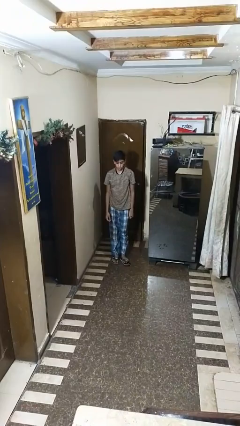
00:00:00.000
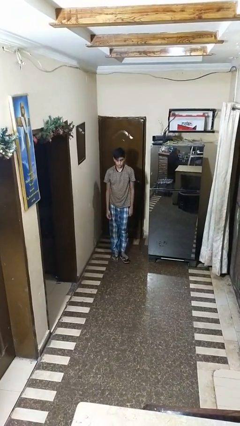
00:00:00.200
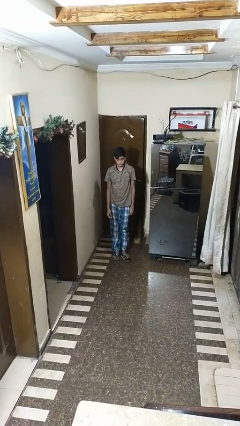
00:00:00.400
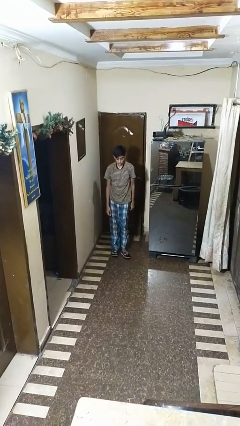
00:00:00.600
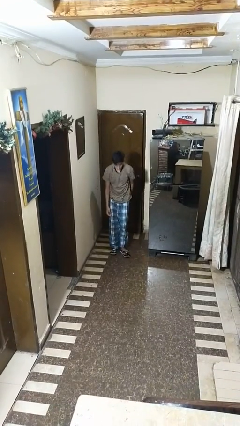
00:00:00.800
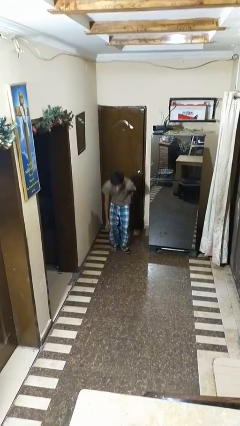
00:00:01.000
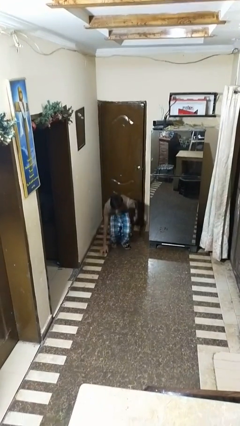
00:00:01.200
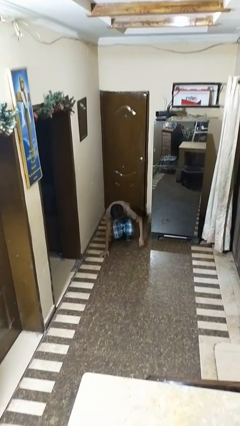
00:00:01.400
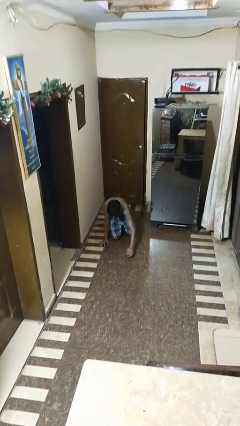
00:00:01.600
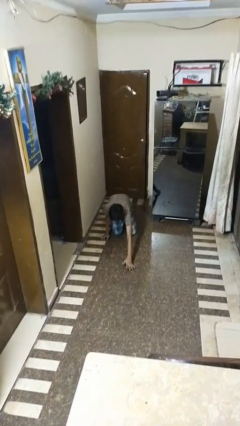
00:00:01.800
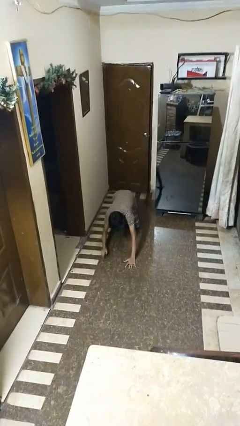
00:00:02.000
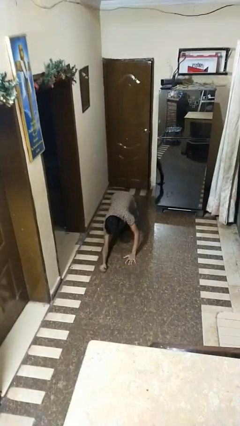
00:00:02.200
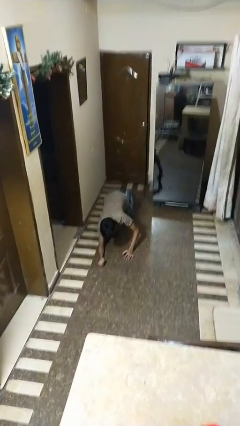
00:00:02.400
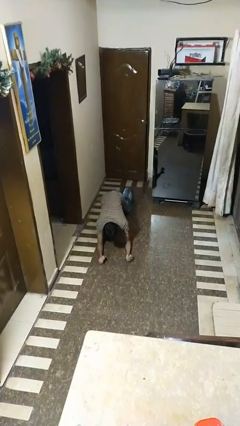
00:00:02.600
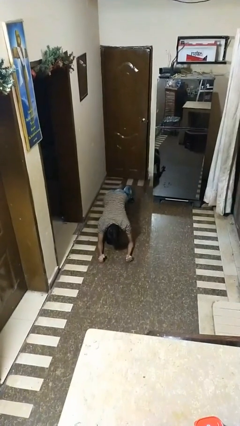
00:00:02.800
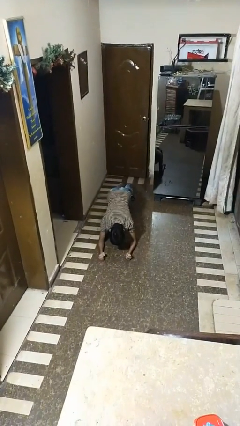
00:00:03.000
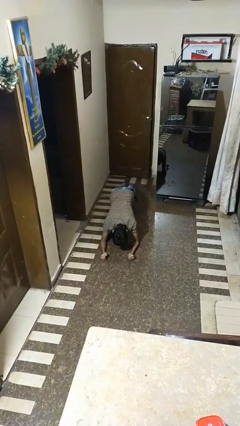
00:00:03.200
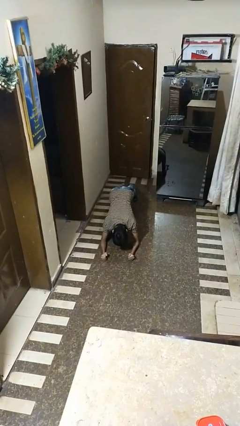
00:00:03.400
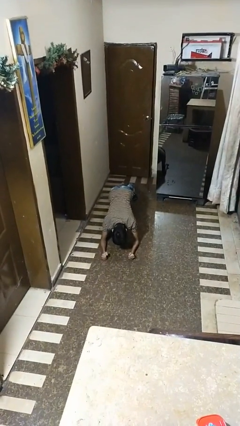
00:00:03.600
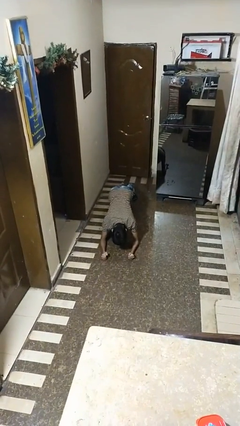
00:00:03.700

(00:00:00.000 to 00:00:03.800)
person exercises with plank

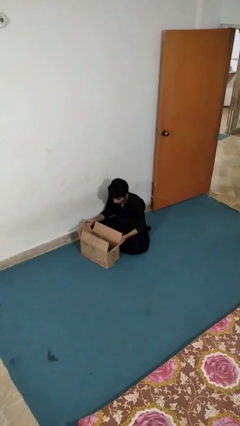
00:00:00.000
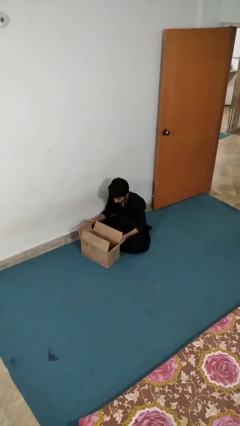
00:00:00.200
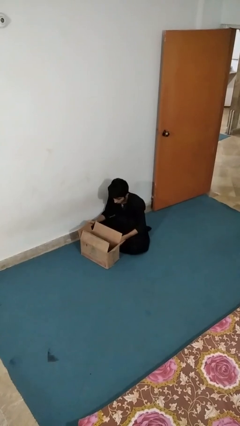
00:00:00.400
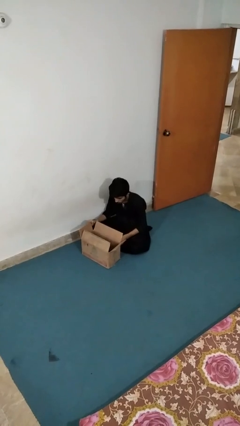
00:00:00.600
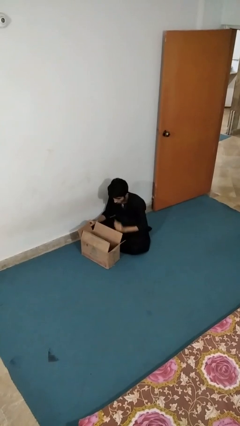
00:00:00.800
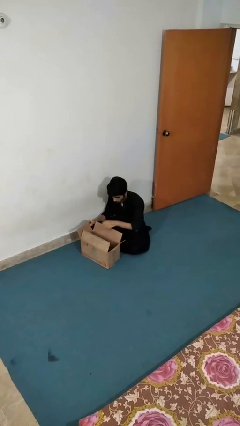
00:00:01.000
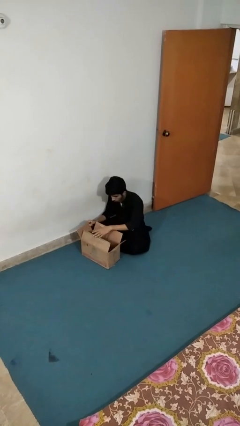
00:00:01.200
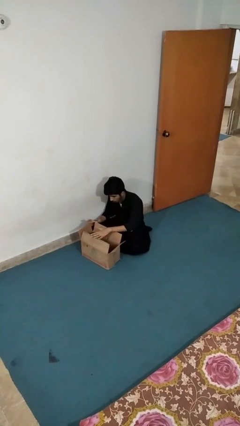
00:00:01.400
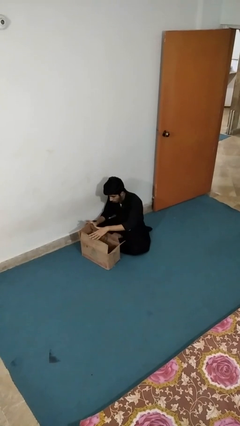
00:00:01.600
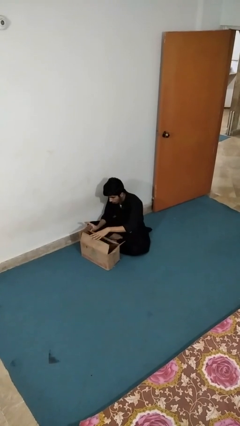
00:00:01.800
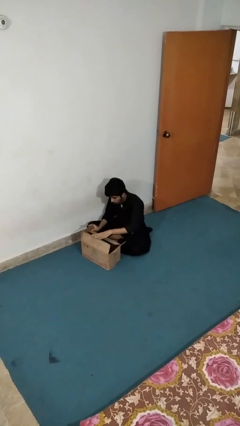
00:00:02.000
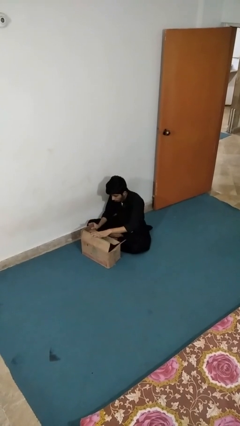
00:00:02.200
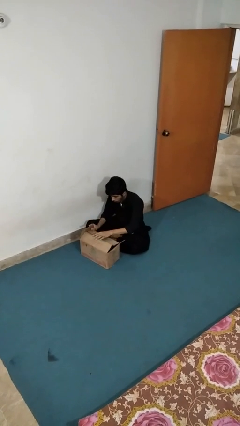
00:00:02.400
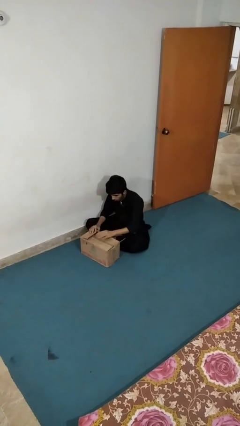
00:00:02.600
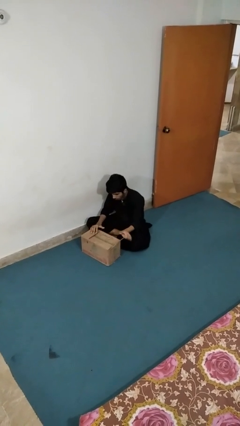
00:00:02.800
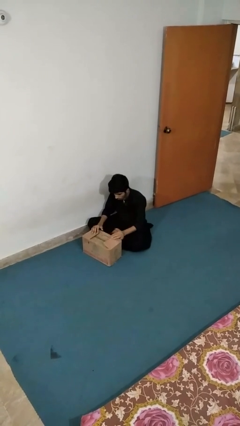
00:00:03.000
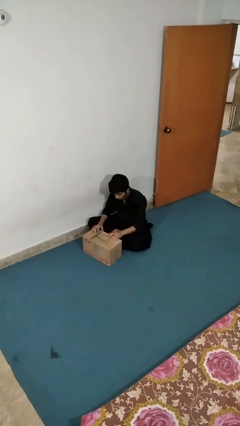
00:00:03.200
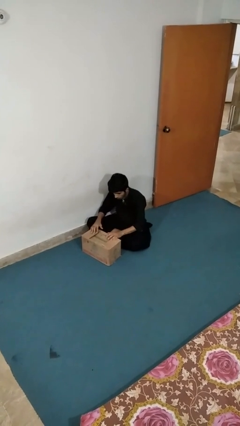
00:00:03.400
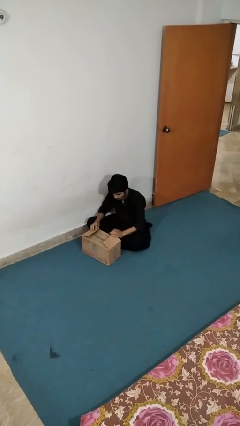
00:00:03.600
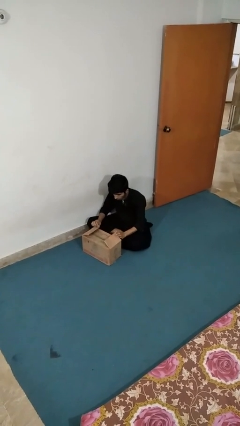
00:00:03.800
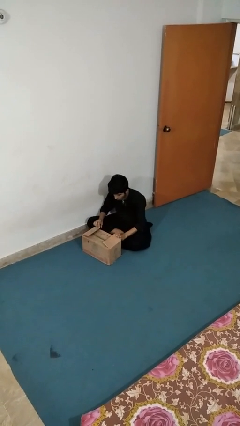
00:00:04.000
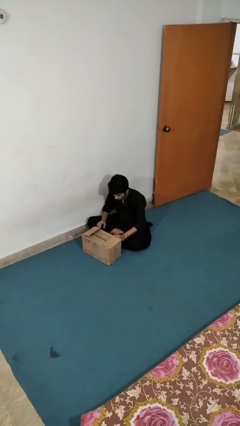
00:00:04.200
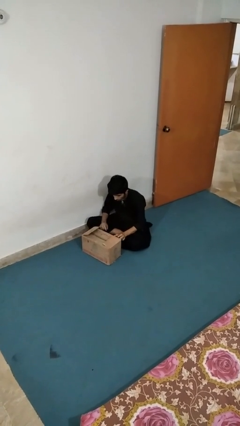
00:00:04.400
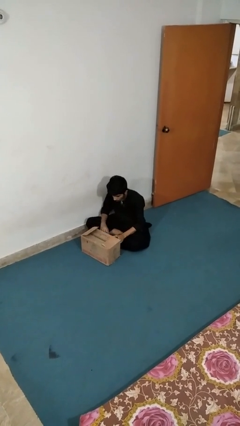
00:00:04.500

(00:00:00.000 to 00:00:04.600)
person closes box

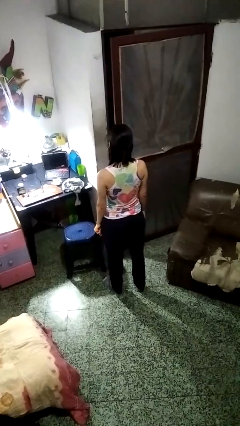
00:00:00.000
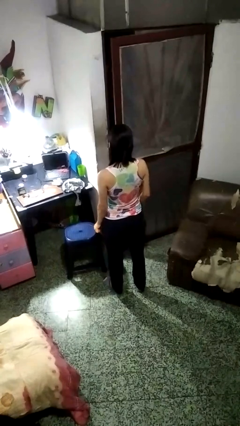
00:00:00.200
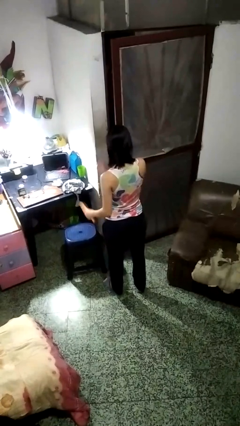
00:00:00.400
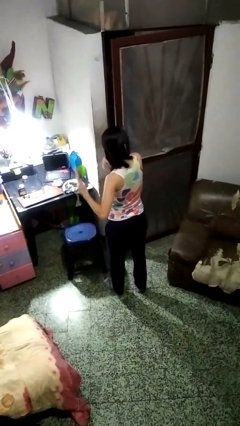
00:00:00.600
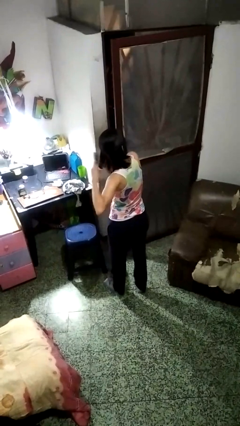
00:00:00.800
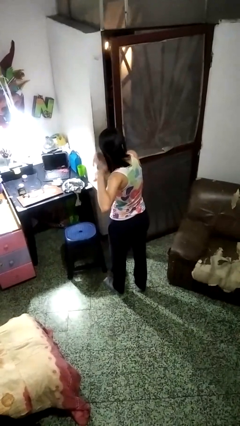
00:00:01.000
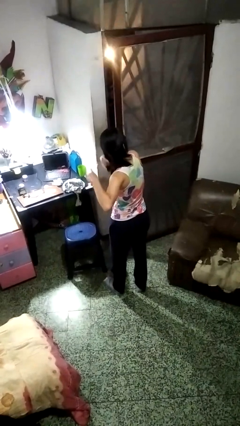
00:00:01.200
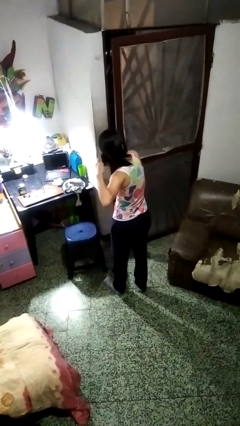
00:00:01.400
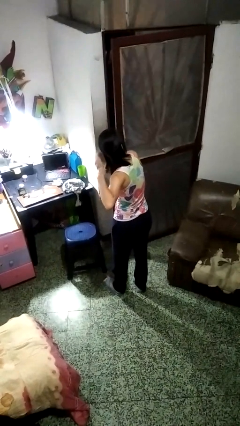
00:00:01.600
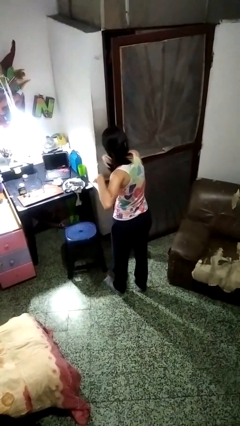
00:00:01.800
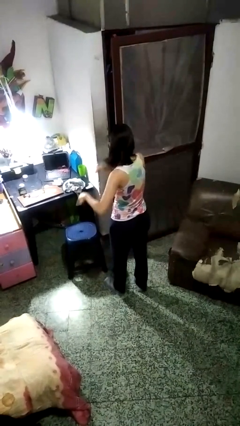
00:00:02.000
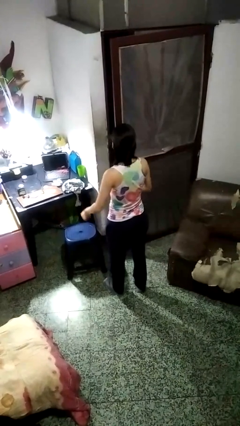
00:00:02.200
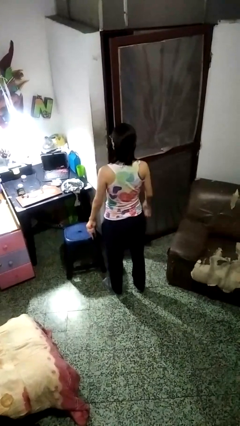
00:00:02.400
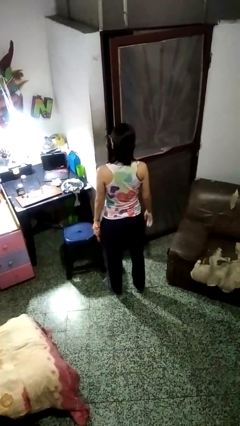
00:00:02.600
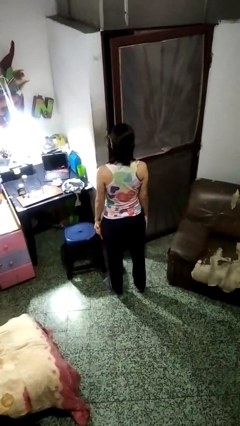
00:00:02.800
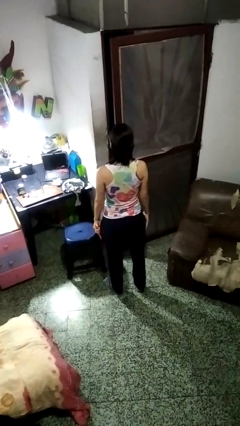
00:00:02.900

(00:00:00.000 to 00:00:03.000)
person brushes hair

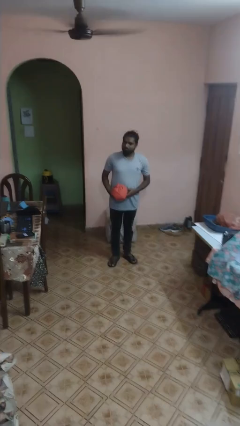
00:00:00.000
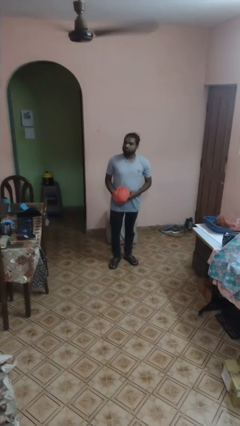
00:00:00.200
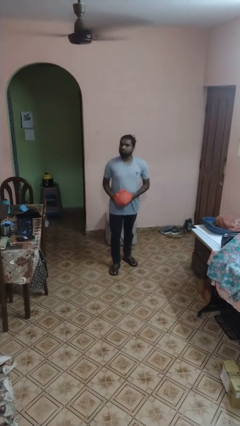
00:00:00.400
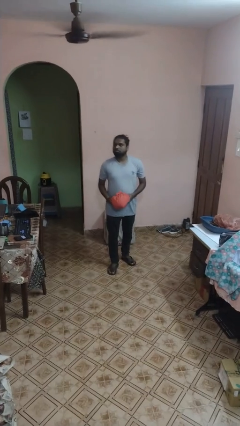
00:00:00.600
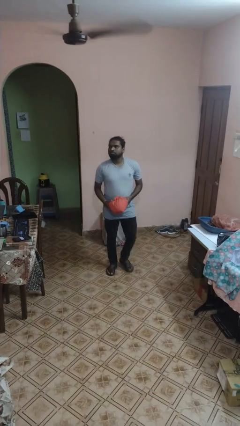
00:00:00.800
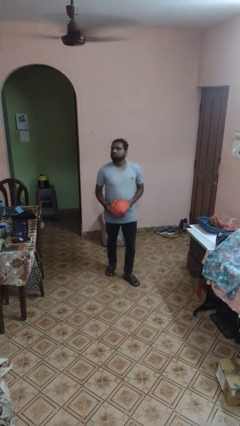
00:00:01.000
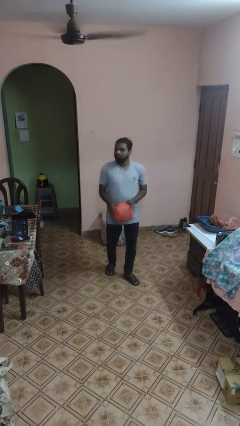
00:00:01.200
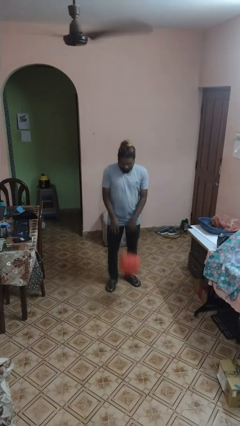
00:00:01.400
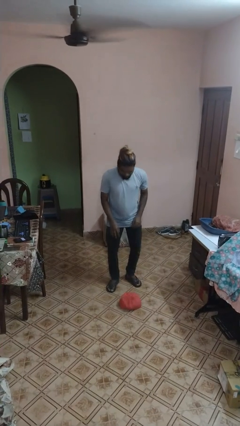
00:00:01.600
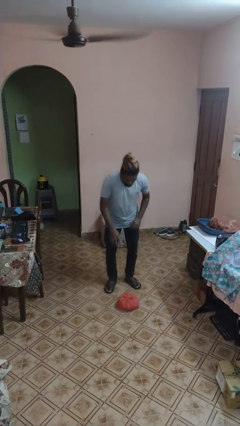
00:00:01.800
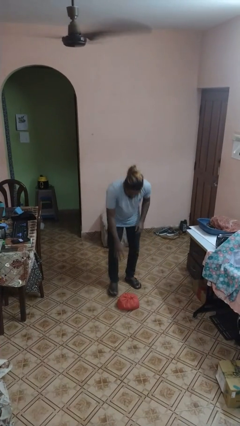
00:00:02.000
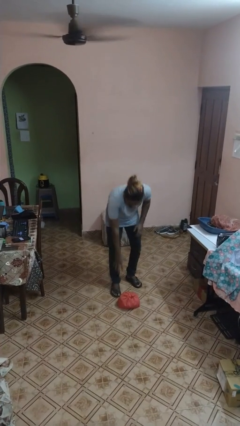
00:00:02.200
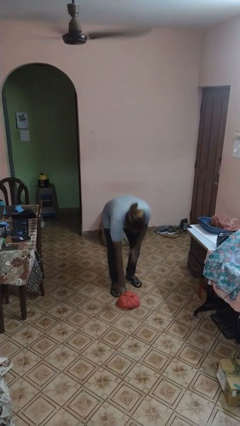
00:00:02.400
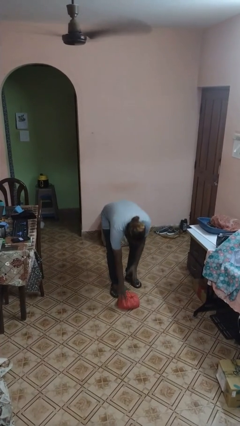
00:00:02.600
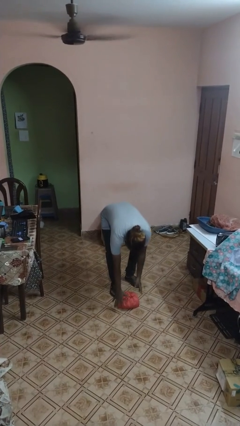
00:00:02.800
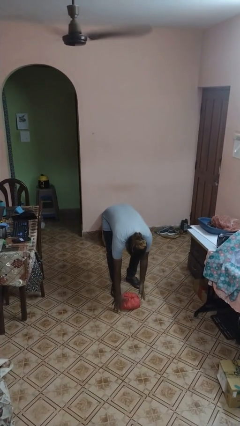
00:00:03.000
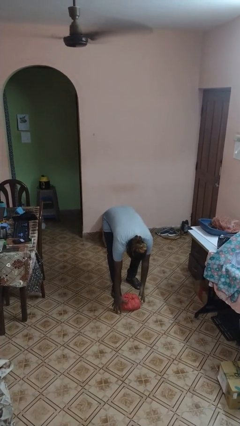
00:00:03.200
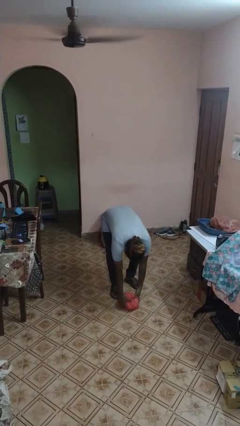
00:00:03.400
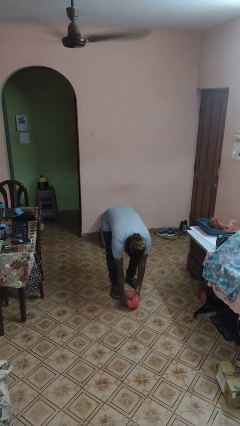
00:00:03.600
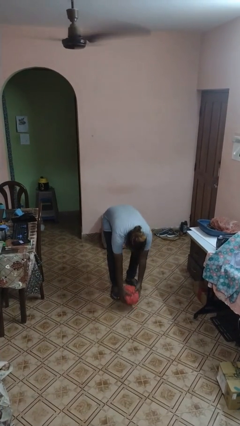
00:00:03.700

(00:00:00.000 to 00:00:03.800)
person drops object

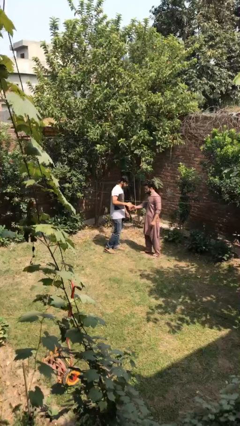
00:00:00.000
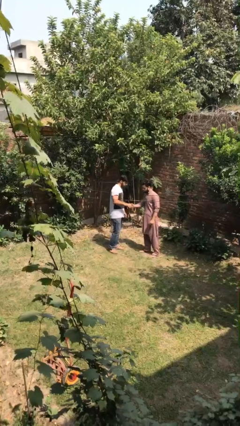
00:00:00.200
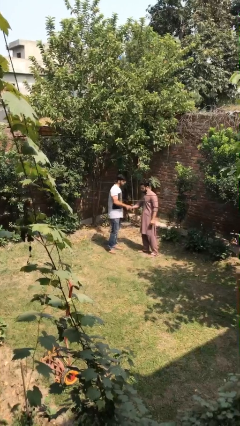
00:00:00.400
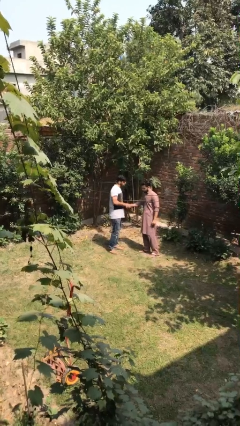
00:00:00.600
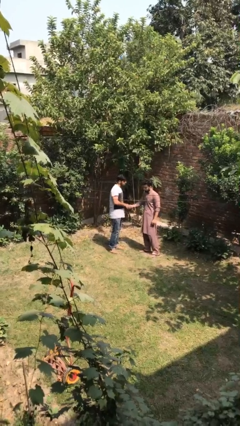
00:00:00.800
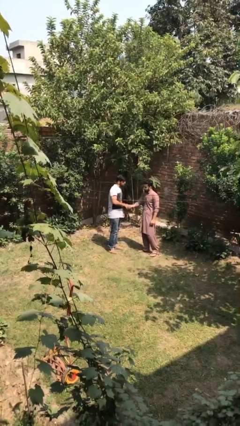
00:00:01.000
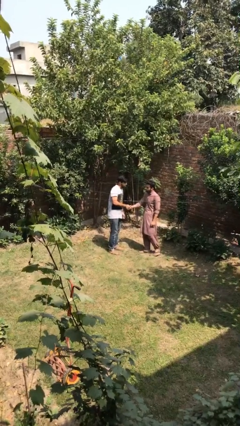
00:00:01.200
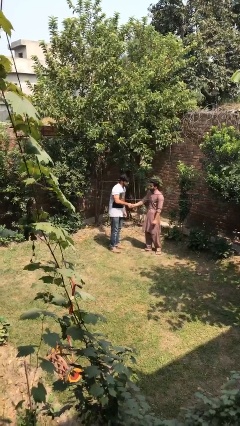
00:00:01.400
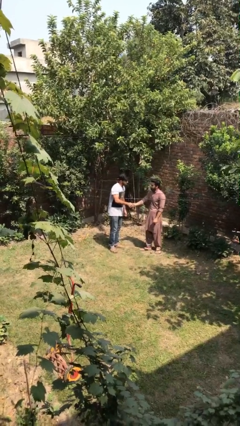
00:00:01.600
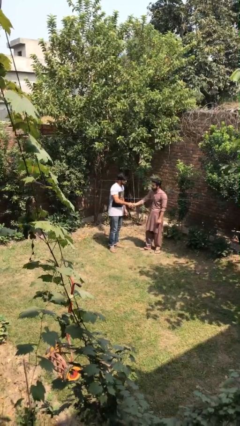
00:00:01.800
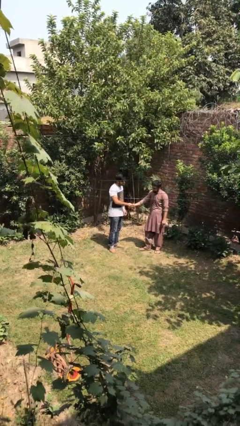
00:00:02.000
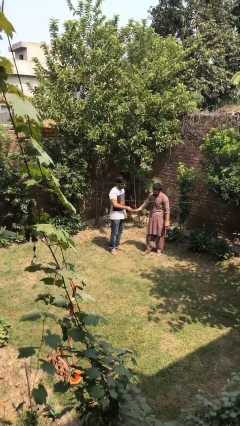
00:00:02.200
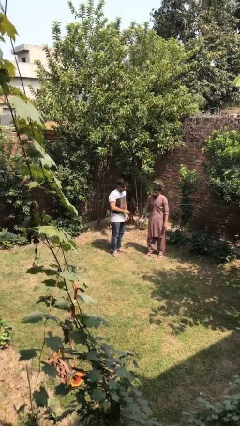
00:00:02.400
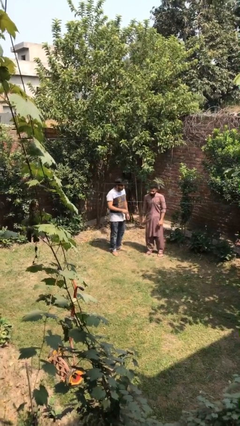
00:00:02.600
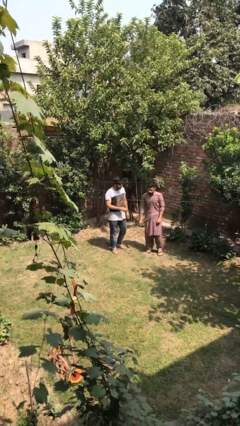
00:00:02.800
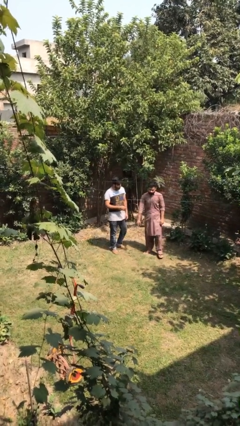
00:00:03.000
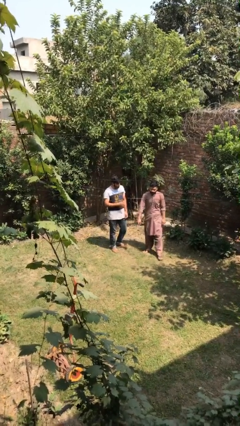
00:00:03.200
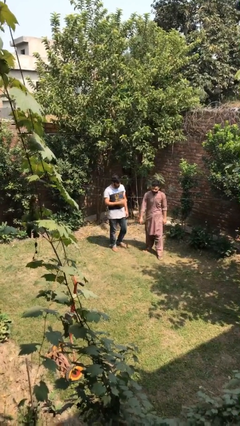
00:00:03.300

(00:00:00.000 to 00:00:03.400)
person shakes hand
